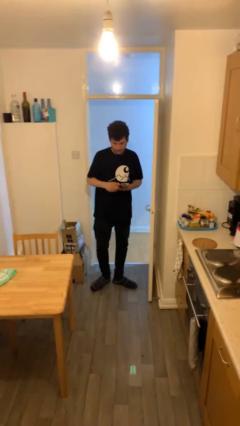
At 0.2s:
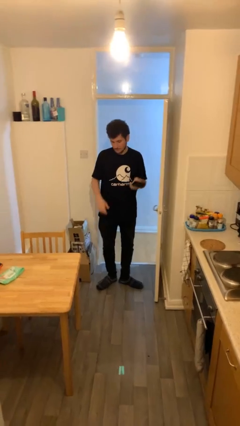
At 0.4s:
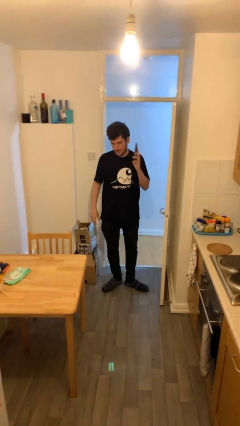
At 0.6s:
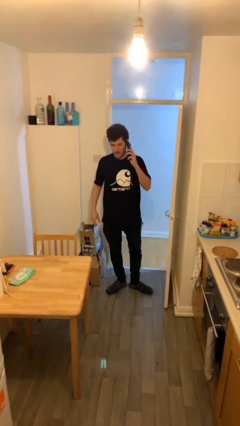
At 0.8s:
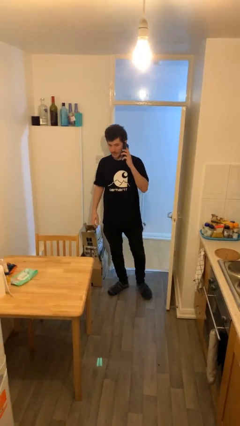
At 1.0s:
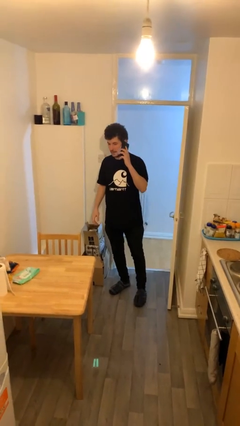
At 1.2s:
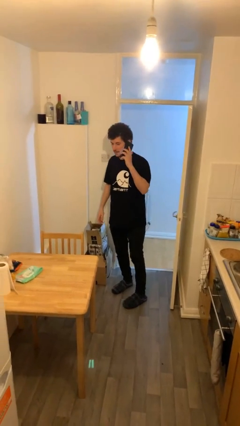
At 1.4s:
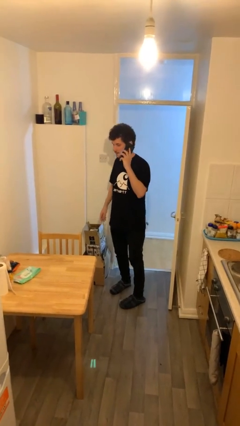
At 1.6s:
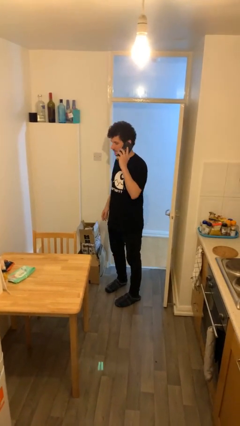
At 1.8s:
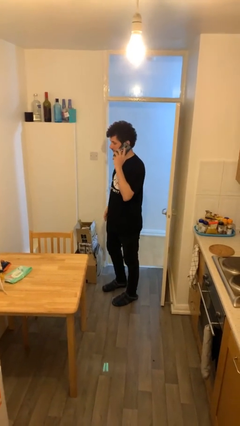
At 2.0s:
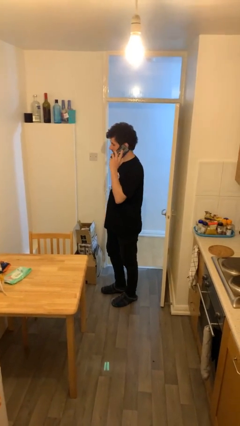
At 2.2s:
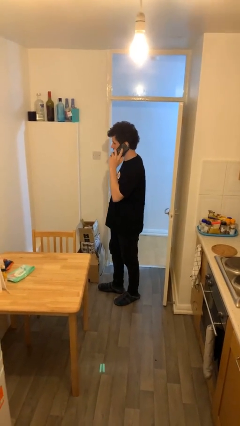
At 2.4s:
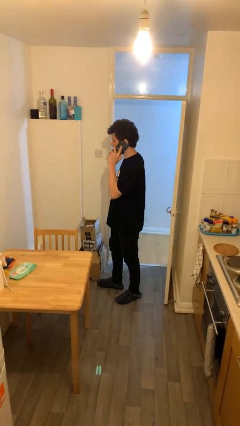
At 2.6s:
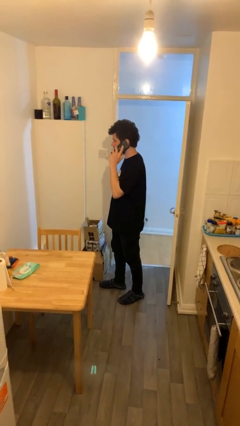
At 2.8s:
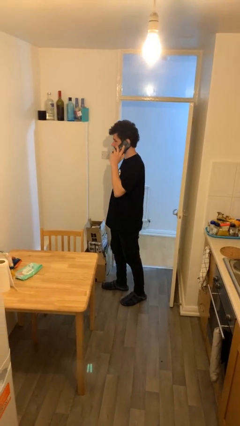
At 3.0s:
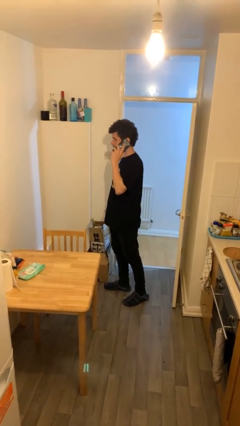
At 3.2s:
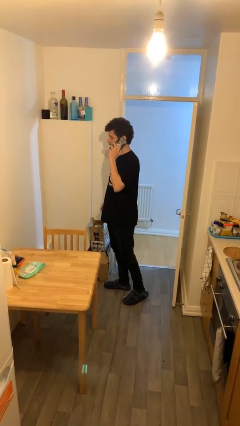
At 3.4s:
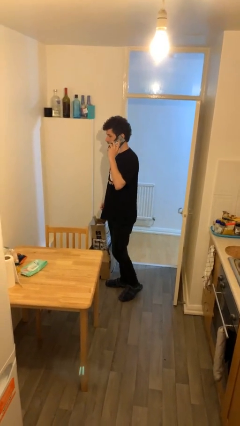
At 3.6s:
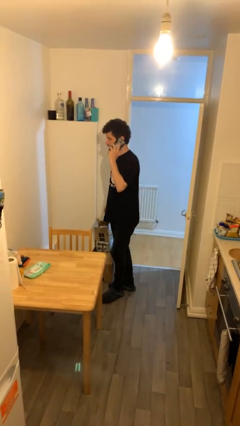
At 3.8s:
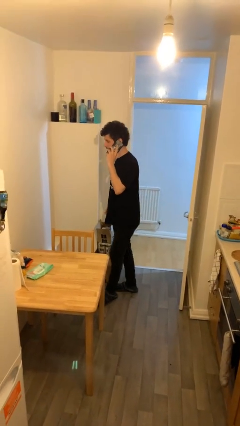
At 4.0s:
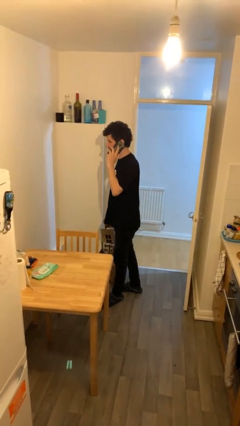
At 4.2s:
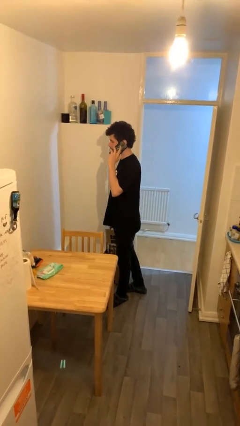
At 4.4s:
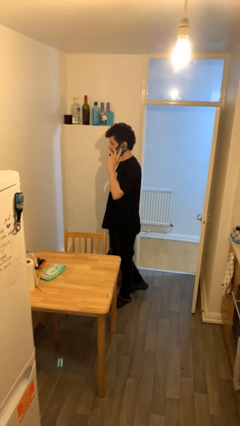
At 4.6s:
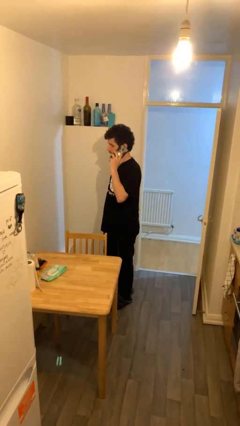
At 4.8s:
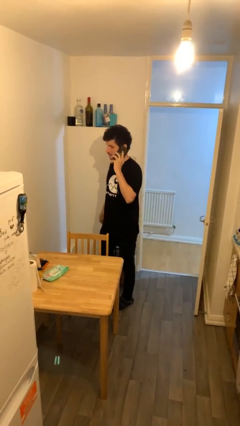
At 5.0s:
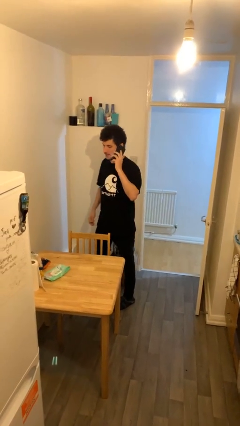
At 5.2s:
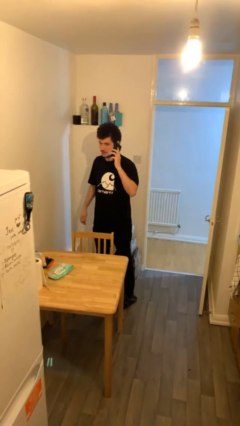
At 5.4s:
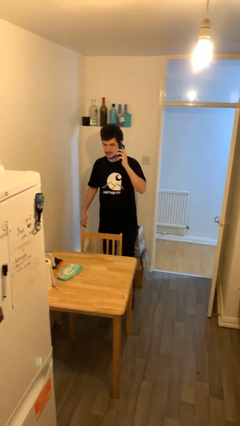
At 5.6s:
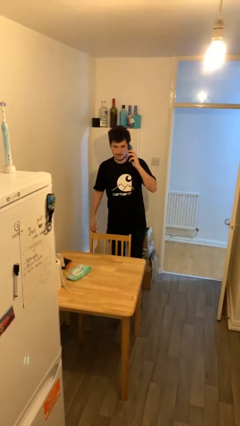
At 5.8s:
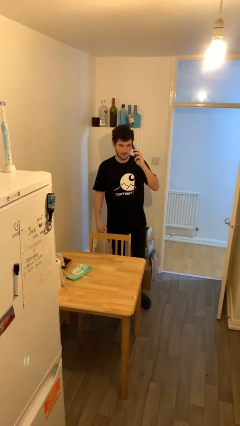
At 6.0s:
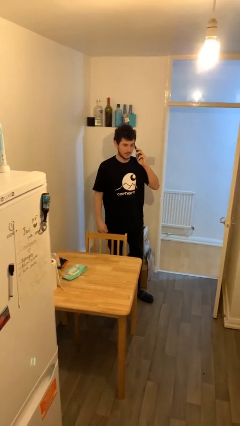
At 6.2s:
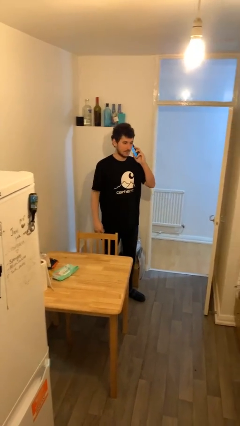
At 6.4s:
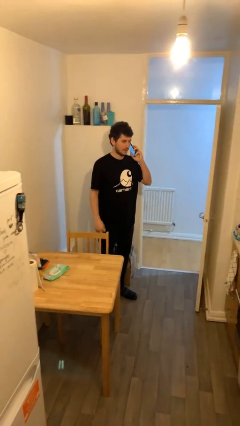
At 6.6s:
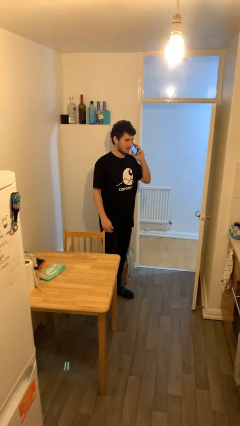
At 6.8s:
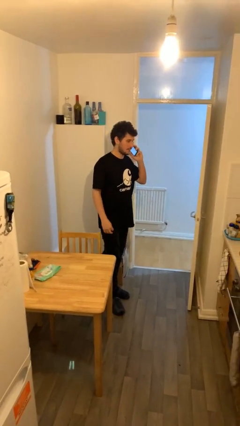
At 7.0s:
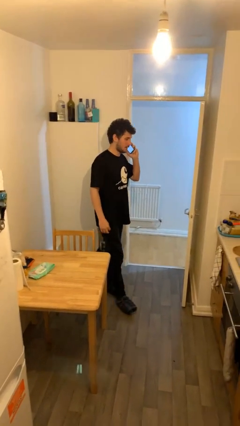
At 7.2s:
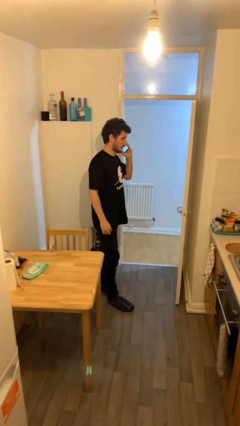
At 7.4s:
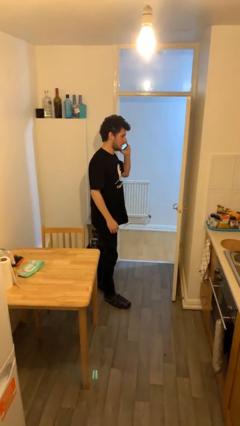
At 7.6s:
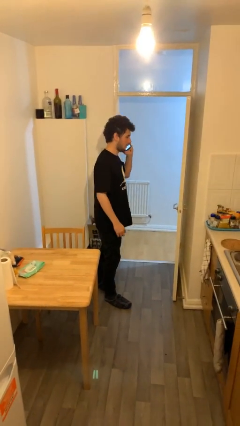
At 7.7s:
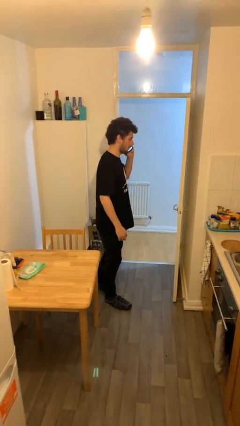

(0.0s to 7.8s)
person talks on phone

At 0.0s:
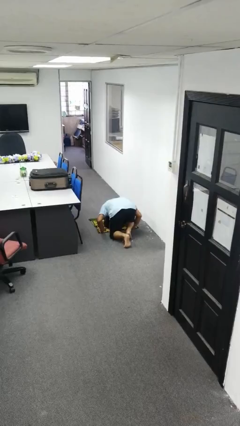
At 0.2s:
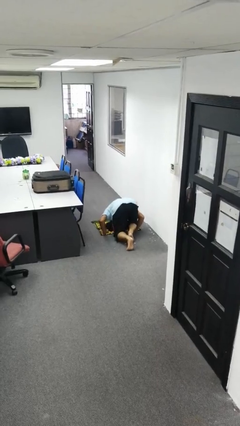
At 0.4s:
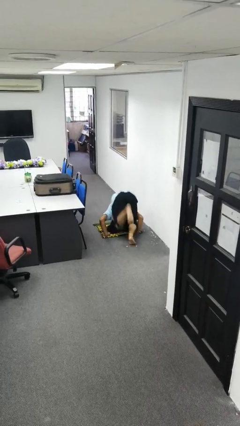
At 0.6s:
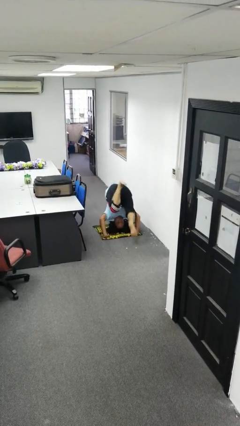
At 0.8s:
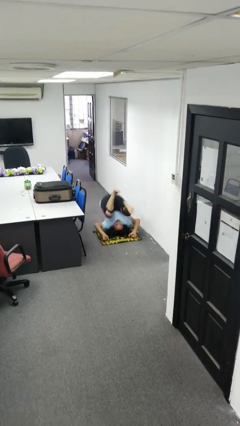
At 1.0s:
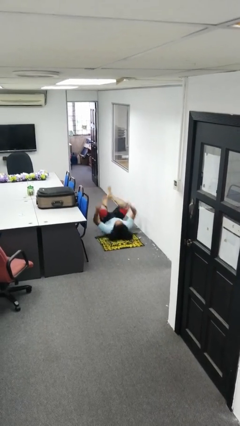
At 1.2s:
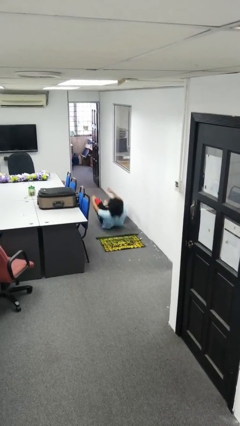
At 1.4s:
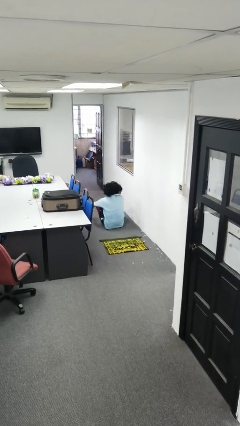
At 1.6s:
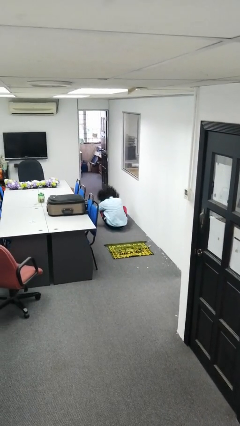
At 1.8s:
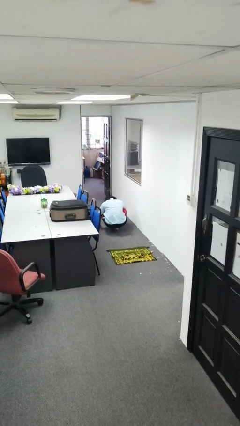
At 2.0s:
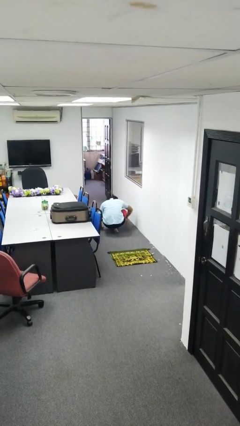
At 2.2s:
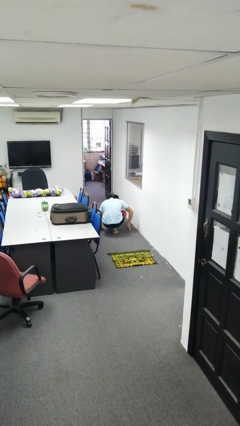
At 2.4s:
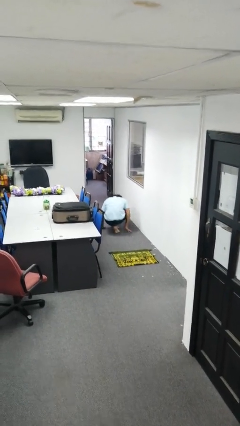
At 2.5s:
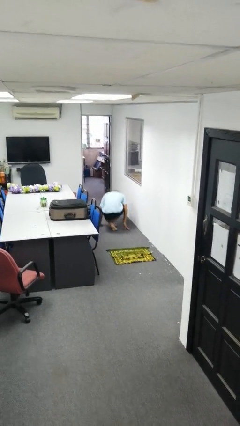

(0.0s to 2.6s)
person somersaults

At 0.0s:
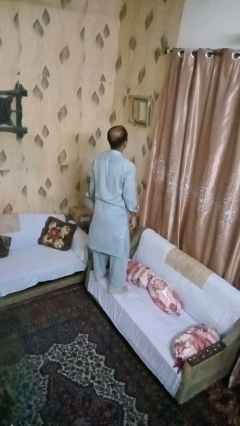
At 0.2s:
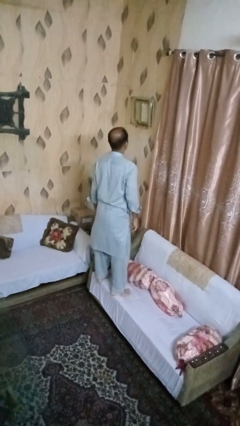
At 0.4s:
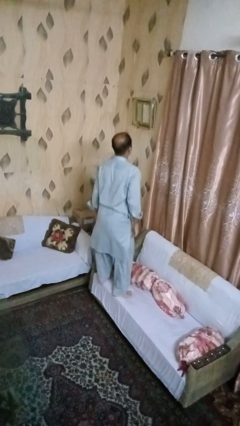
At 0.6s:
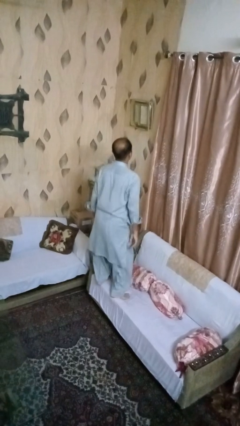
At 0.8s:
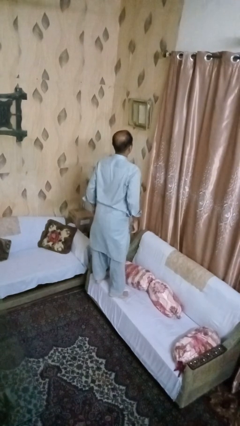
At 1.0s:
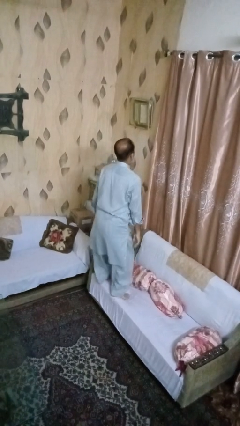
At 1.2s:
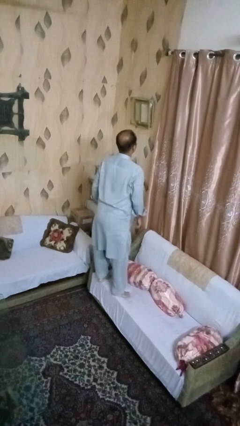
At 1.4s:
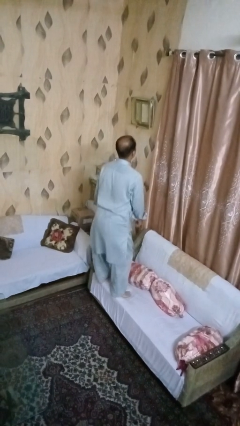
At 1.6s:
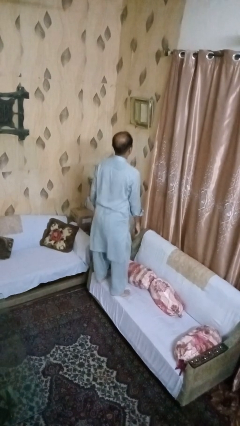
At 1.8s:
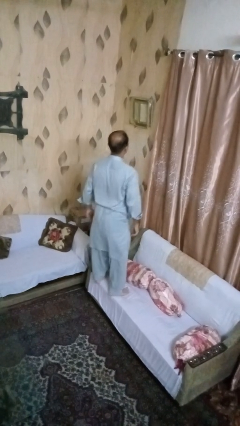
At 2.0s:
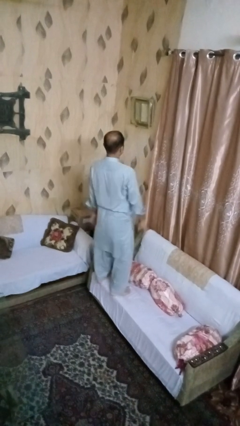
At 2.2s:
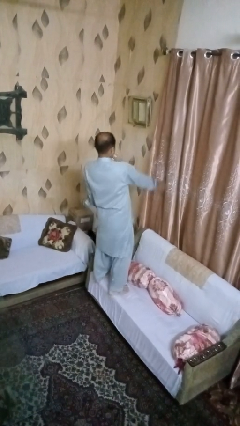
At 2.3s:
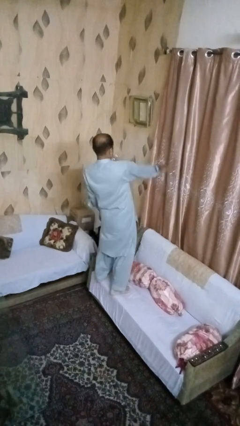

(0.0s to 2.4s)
person jumps on couch

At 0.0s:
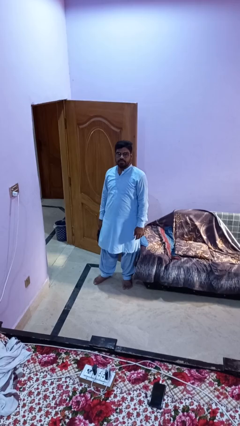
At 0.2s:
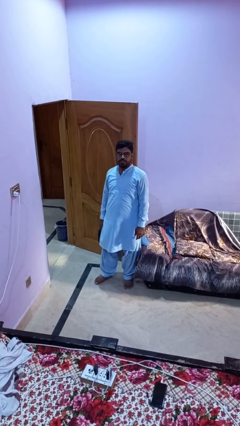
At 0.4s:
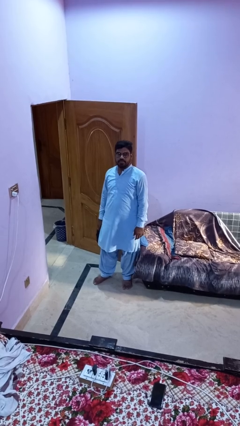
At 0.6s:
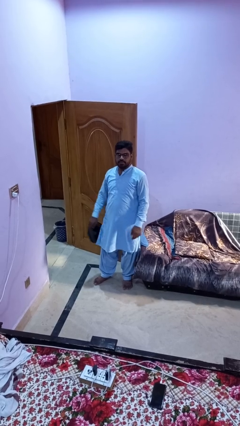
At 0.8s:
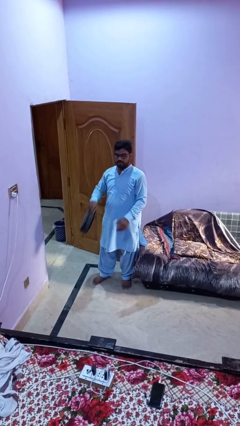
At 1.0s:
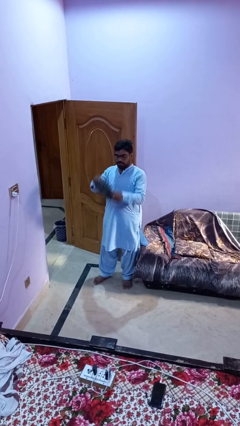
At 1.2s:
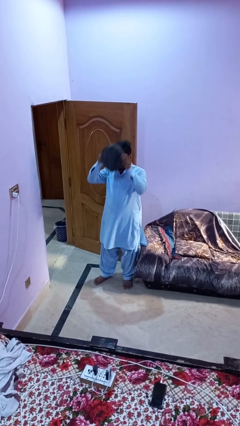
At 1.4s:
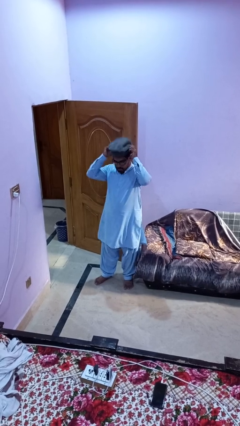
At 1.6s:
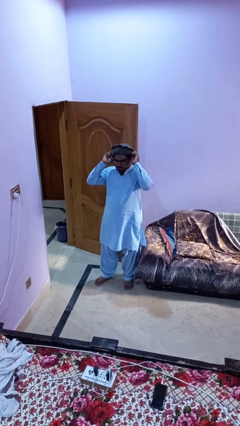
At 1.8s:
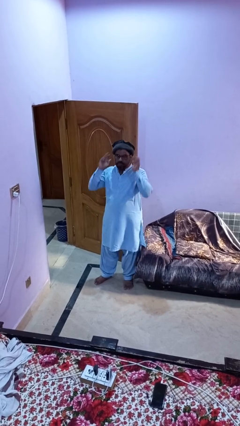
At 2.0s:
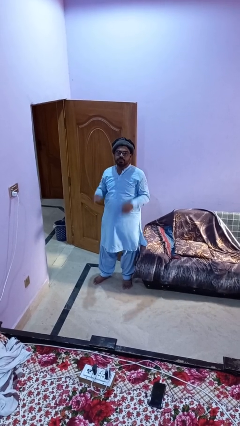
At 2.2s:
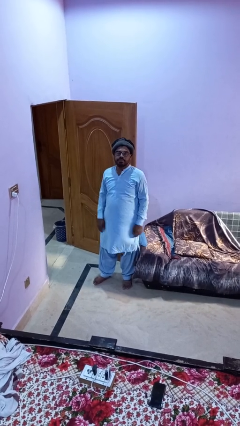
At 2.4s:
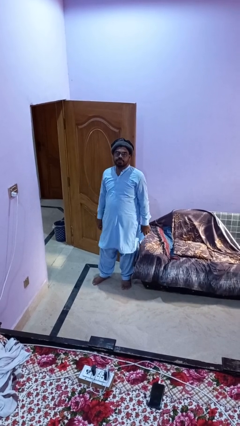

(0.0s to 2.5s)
person puts on hat

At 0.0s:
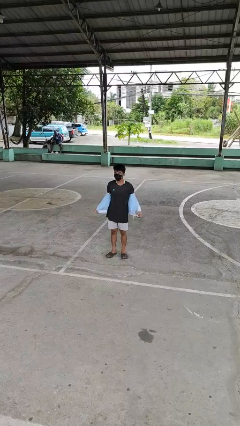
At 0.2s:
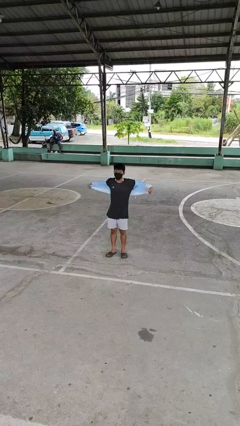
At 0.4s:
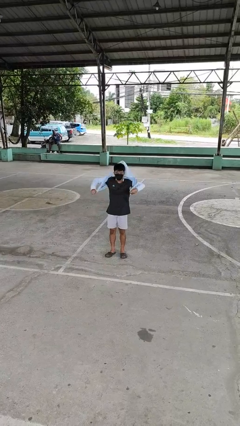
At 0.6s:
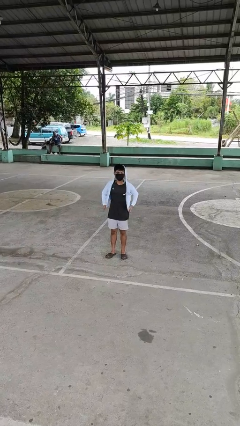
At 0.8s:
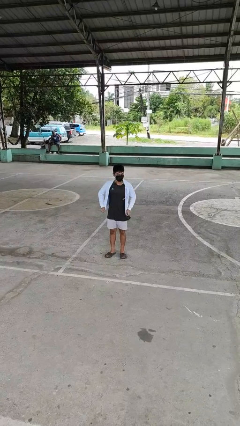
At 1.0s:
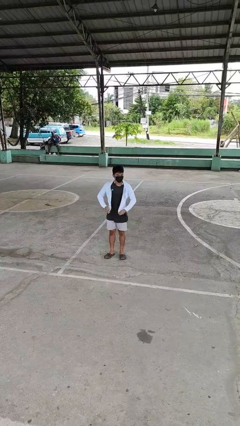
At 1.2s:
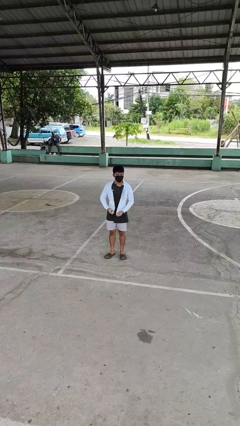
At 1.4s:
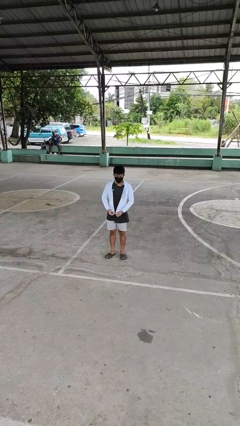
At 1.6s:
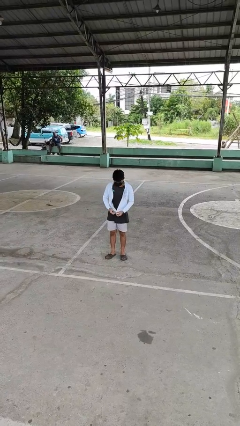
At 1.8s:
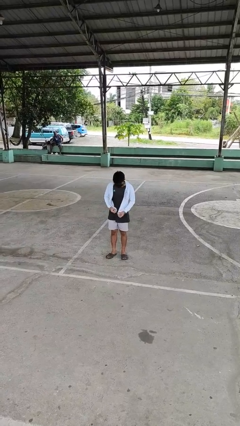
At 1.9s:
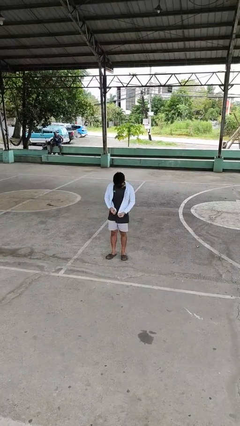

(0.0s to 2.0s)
person puts on jacket

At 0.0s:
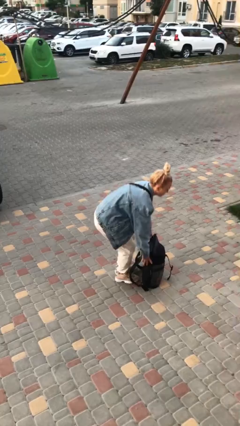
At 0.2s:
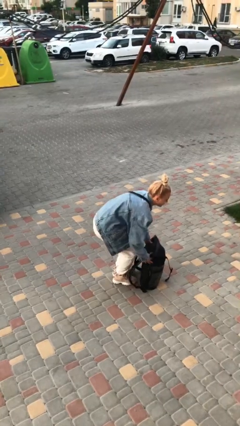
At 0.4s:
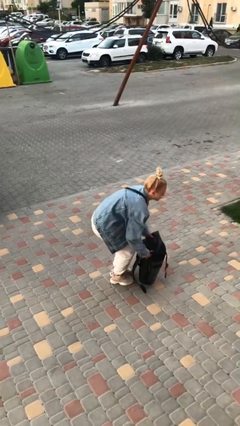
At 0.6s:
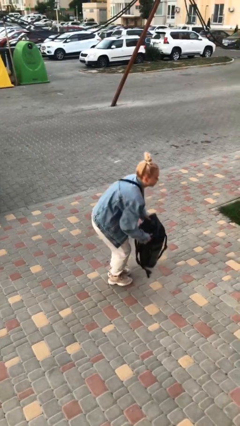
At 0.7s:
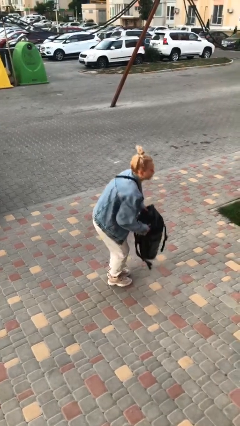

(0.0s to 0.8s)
person picks up object from floor
